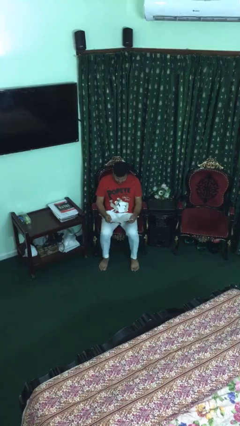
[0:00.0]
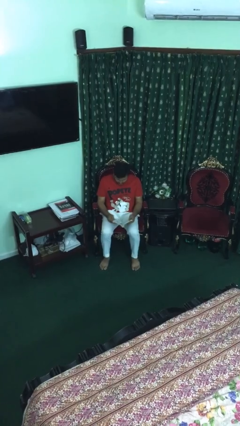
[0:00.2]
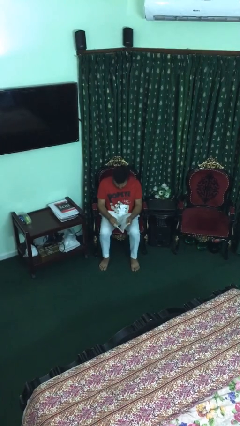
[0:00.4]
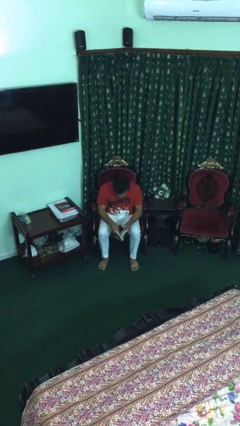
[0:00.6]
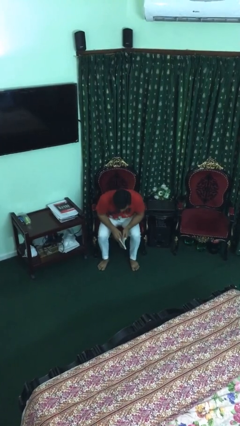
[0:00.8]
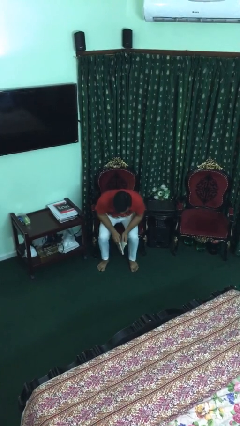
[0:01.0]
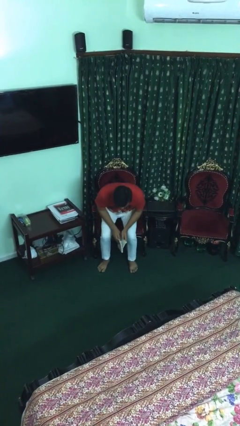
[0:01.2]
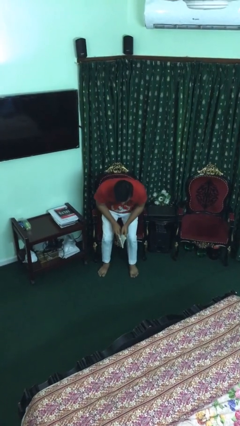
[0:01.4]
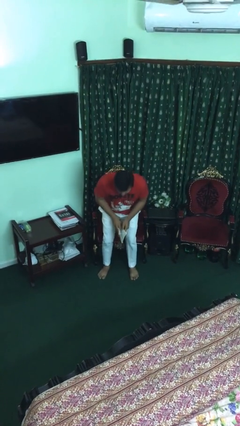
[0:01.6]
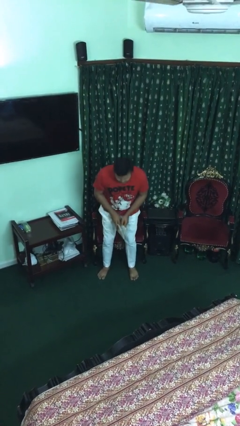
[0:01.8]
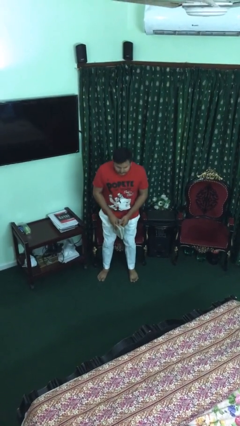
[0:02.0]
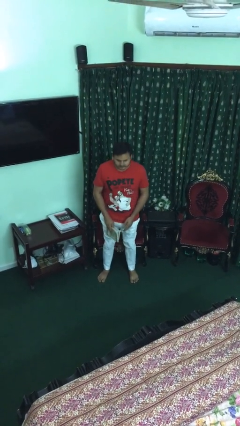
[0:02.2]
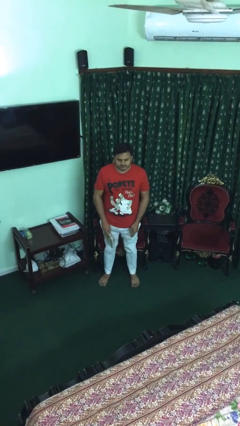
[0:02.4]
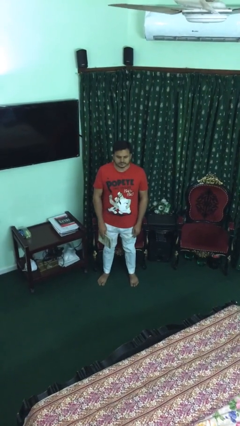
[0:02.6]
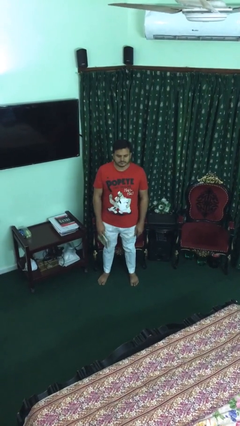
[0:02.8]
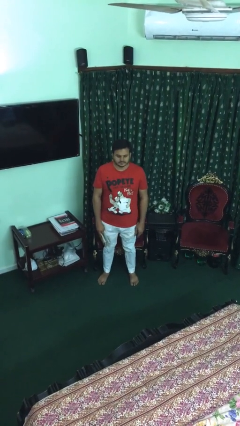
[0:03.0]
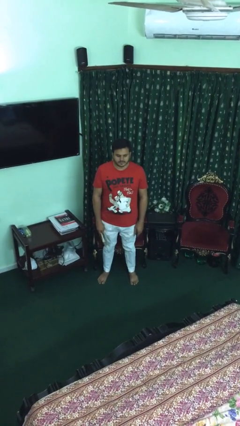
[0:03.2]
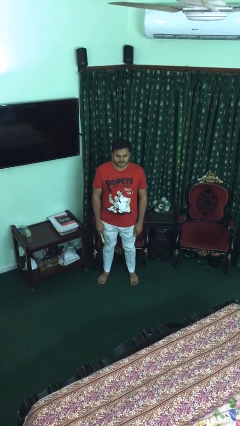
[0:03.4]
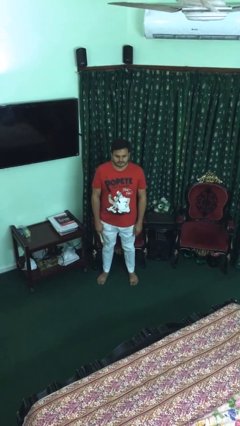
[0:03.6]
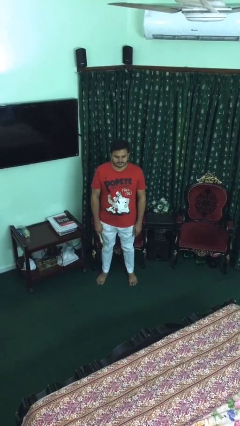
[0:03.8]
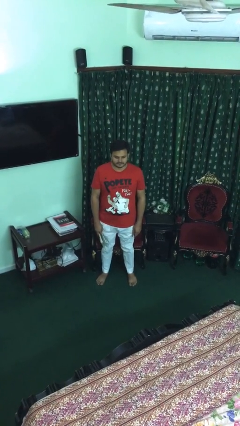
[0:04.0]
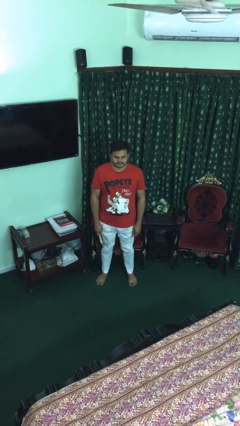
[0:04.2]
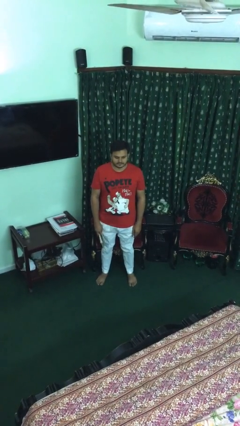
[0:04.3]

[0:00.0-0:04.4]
person stands up

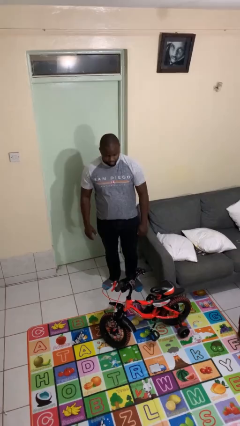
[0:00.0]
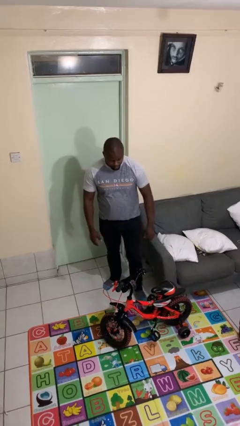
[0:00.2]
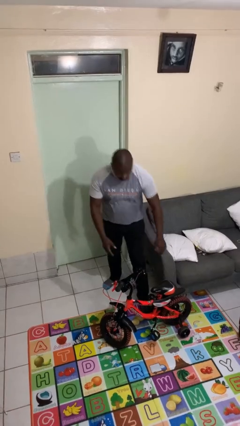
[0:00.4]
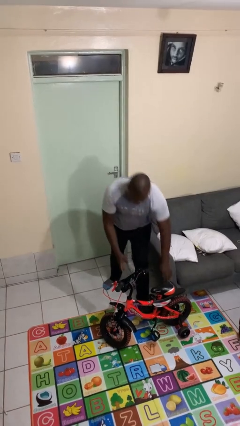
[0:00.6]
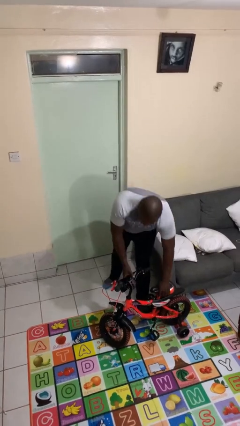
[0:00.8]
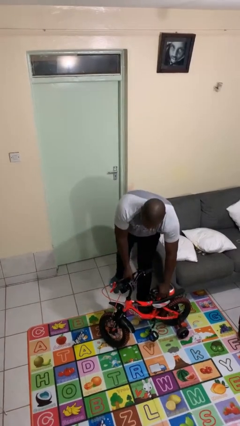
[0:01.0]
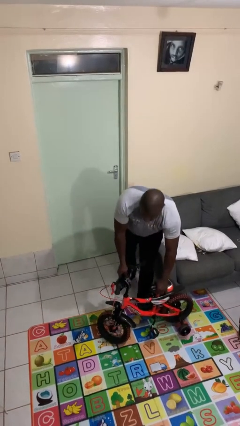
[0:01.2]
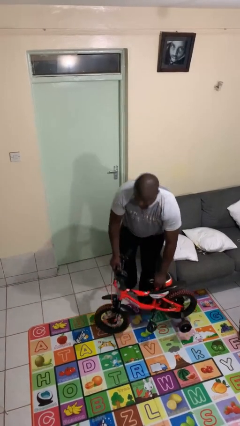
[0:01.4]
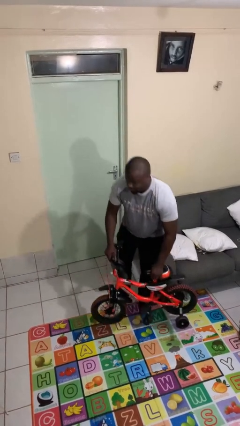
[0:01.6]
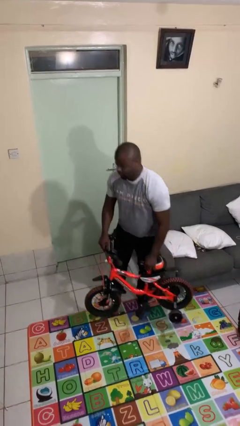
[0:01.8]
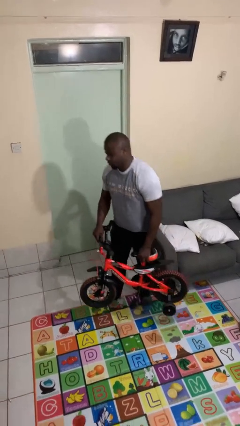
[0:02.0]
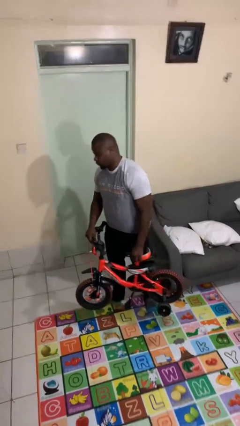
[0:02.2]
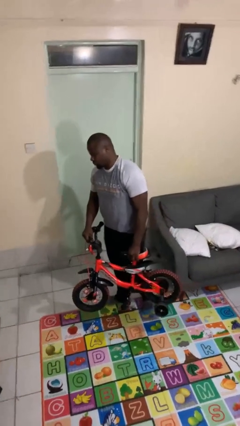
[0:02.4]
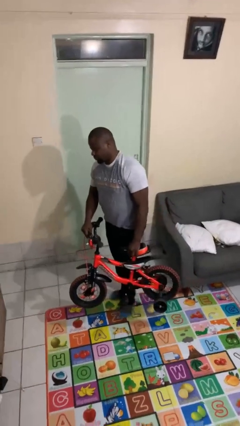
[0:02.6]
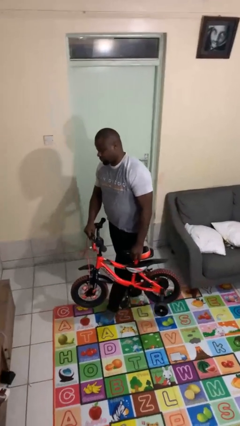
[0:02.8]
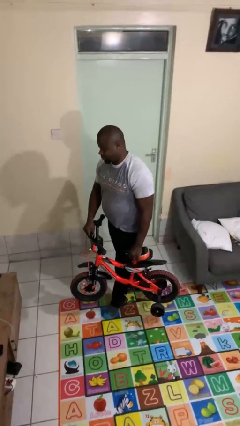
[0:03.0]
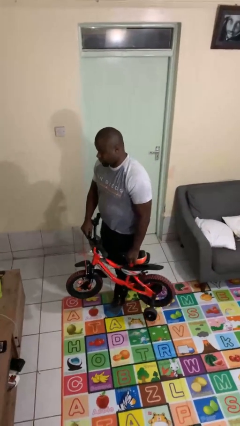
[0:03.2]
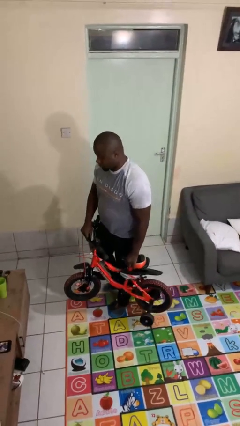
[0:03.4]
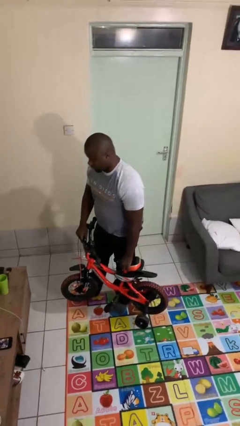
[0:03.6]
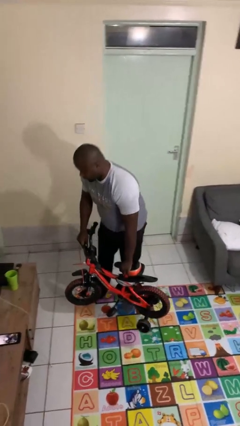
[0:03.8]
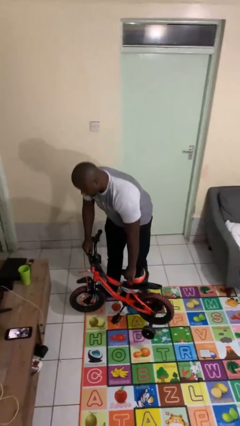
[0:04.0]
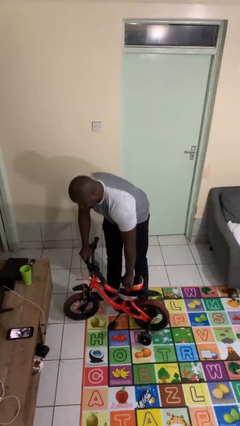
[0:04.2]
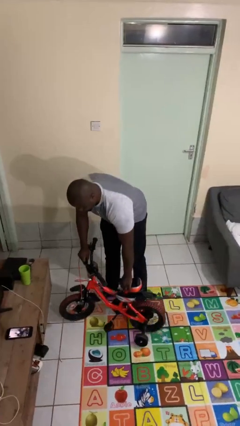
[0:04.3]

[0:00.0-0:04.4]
person carries bicycle

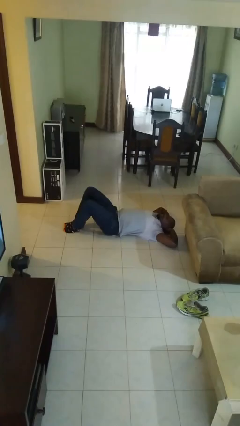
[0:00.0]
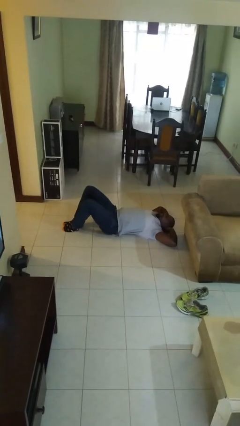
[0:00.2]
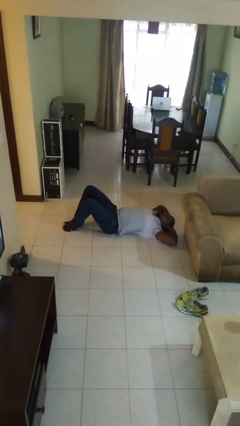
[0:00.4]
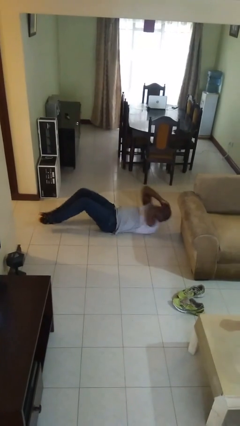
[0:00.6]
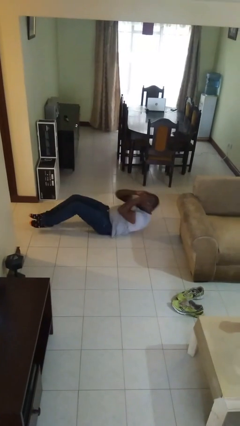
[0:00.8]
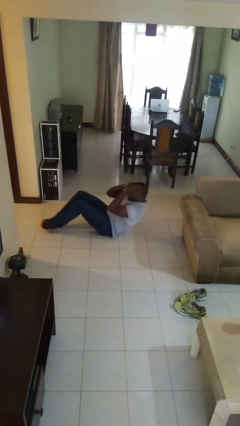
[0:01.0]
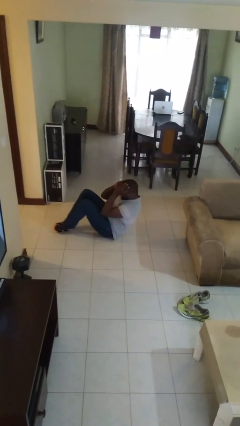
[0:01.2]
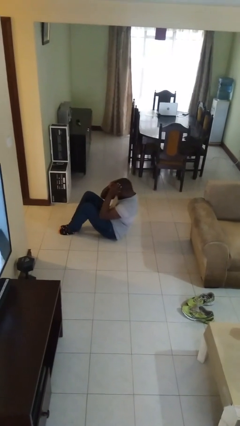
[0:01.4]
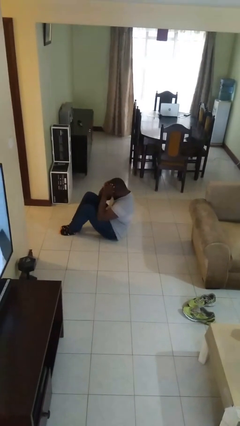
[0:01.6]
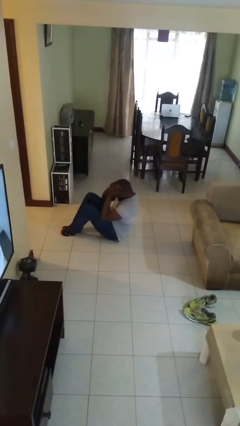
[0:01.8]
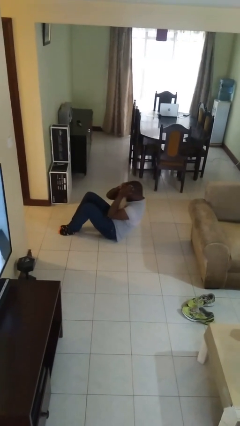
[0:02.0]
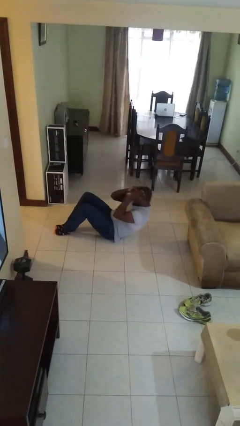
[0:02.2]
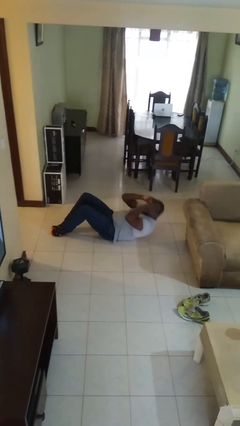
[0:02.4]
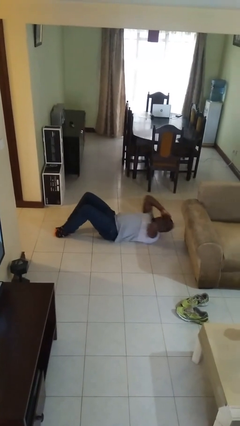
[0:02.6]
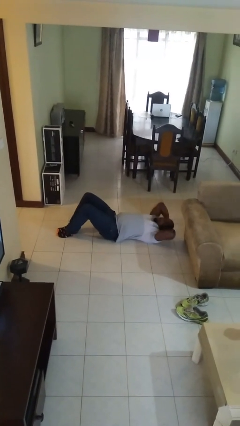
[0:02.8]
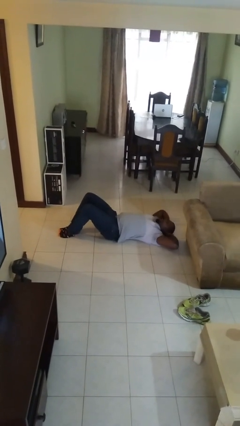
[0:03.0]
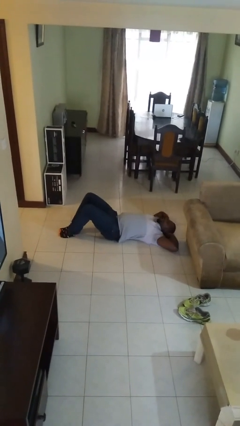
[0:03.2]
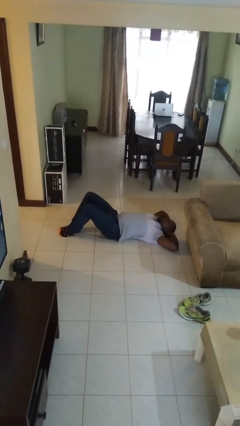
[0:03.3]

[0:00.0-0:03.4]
person exercises with situp

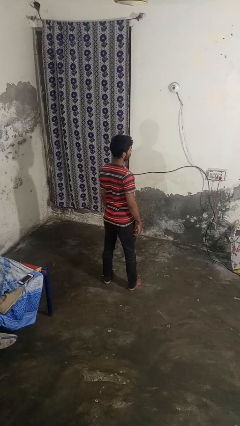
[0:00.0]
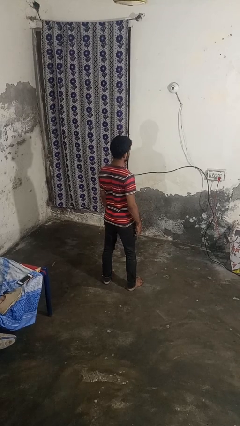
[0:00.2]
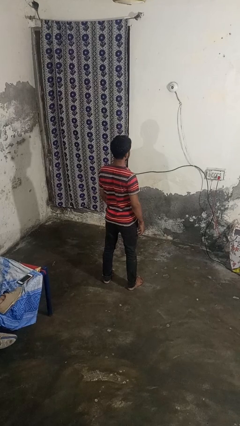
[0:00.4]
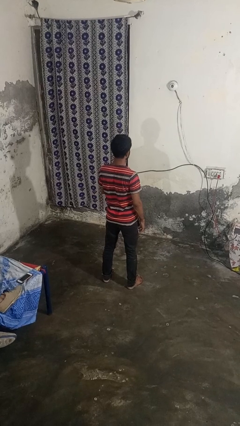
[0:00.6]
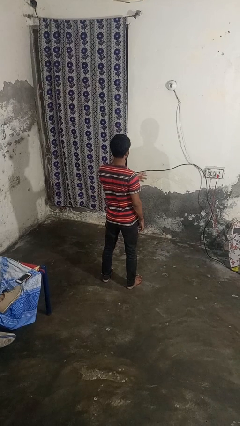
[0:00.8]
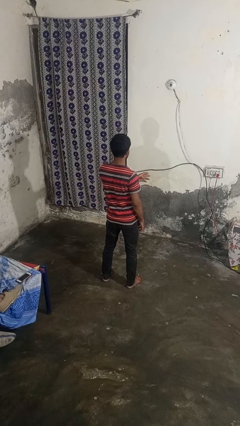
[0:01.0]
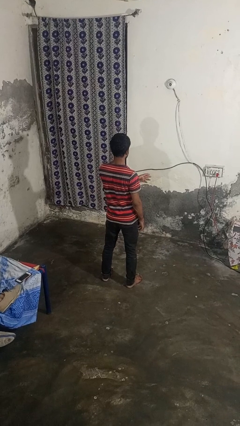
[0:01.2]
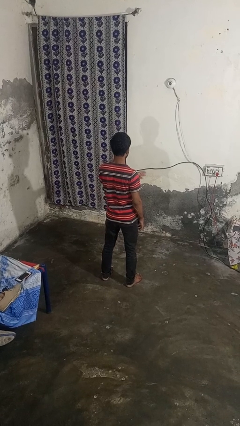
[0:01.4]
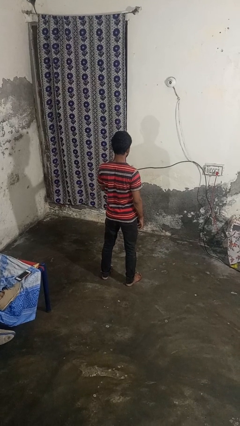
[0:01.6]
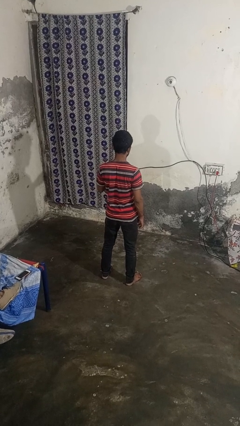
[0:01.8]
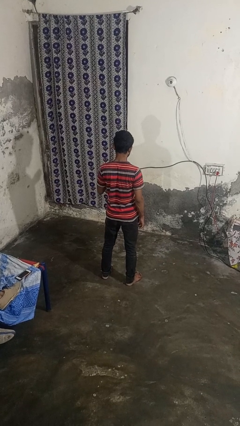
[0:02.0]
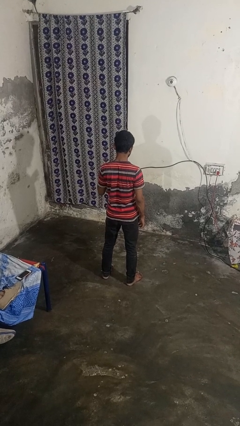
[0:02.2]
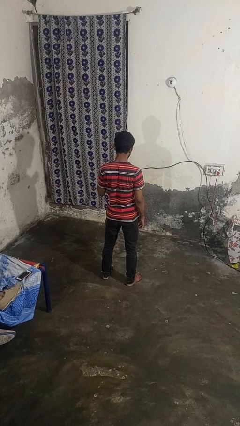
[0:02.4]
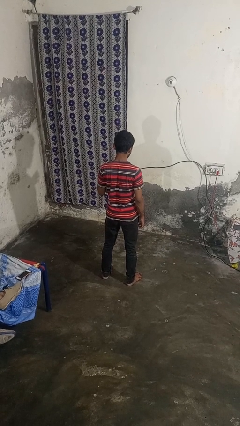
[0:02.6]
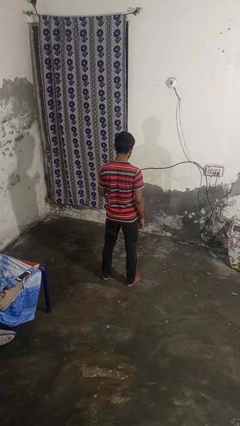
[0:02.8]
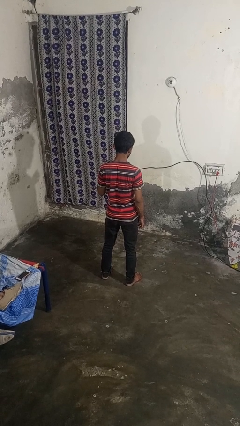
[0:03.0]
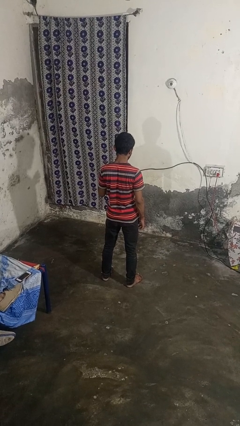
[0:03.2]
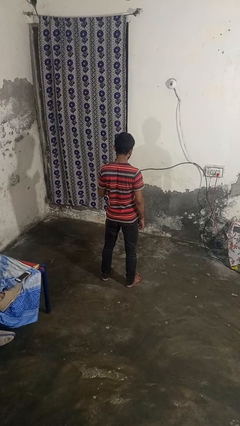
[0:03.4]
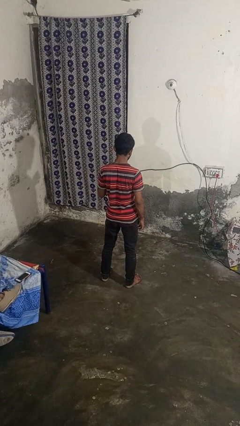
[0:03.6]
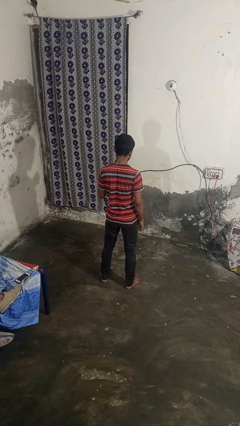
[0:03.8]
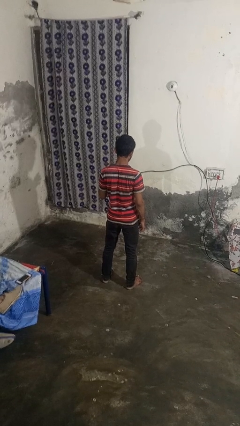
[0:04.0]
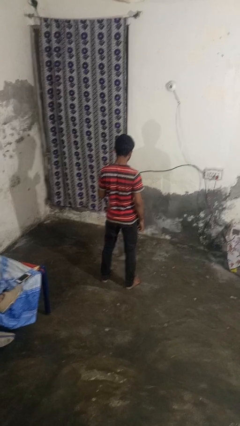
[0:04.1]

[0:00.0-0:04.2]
person gestures swipe left

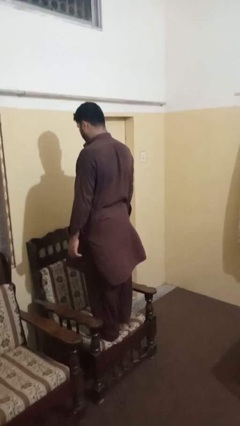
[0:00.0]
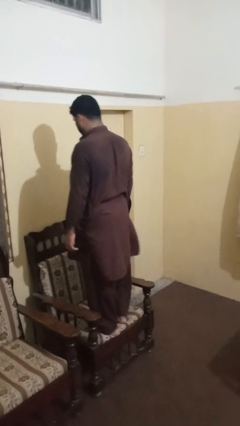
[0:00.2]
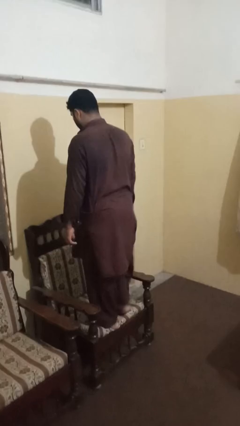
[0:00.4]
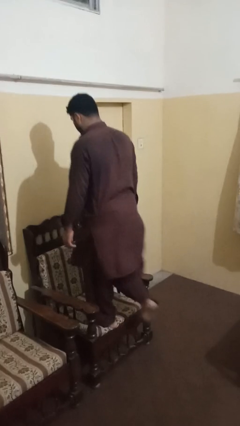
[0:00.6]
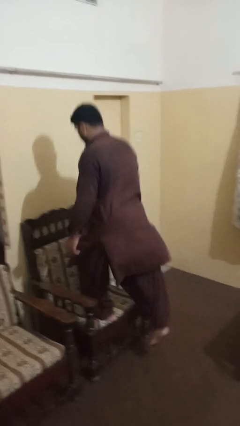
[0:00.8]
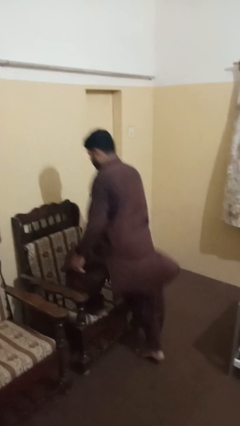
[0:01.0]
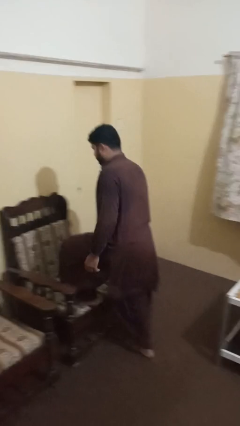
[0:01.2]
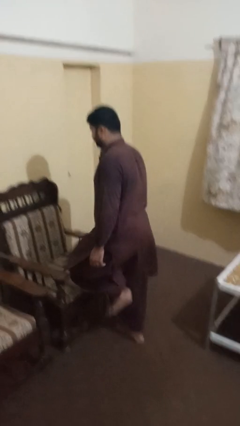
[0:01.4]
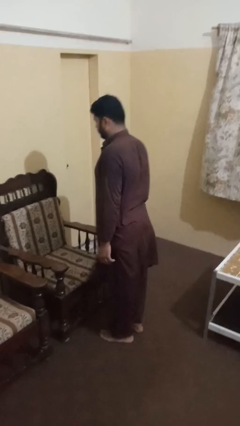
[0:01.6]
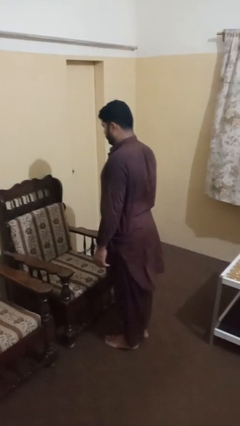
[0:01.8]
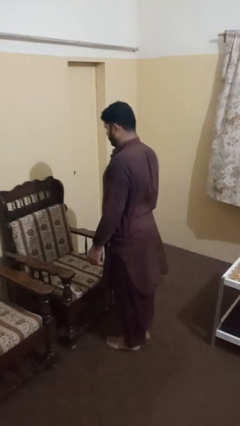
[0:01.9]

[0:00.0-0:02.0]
person climbs off chair
